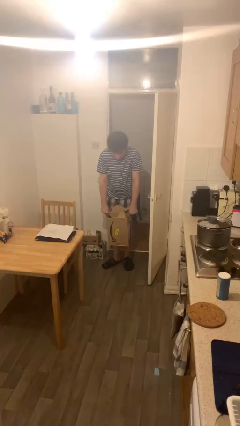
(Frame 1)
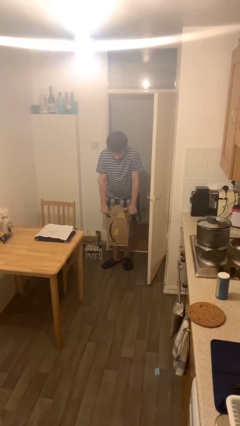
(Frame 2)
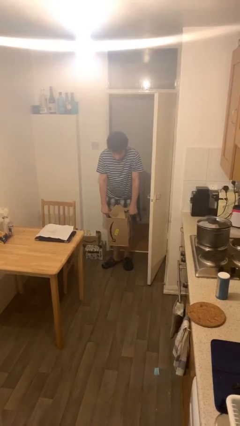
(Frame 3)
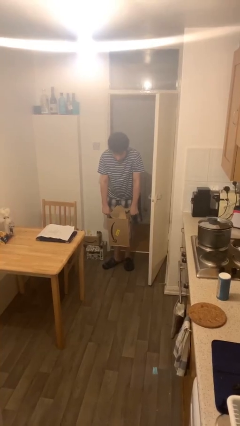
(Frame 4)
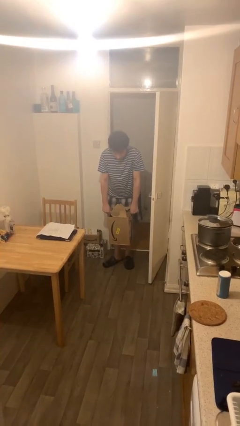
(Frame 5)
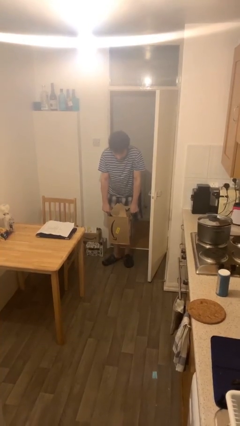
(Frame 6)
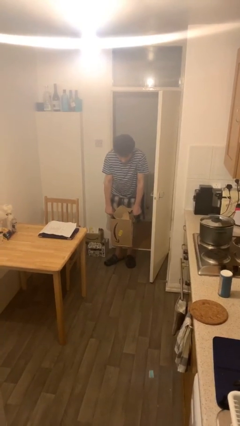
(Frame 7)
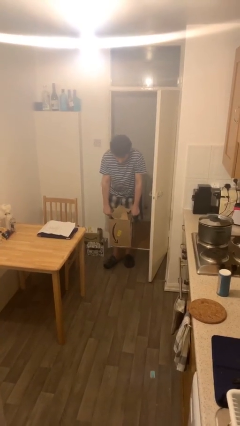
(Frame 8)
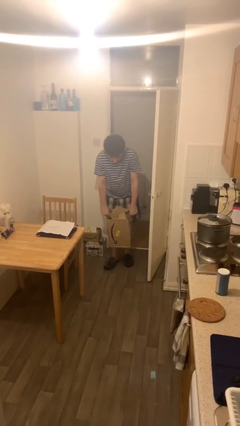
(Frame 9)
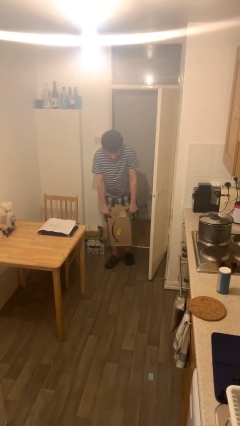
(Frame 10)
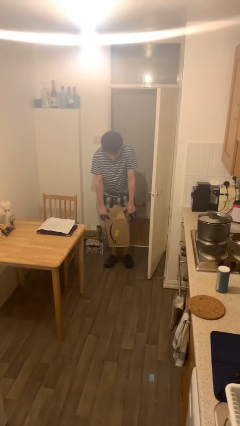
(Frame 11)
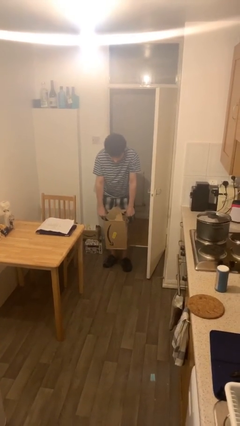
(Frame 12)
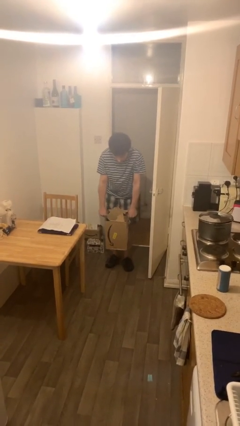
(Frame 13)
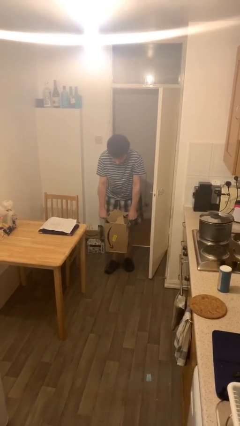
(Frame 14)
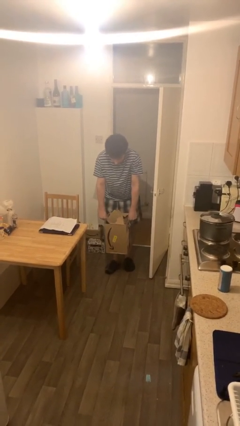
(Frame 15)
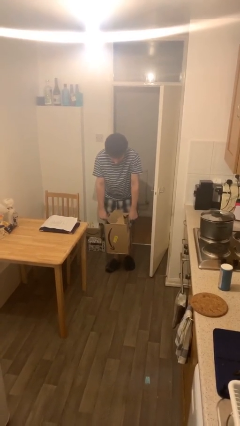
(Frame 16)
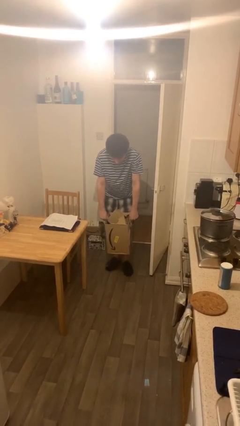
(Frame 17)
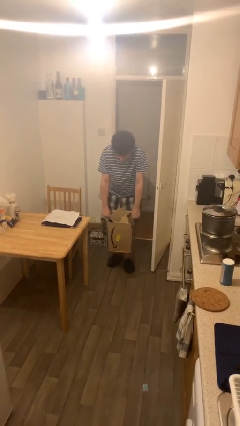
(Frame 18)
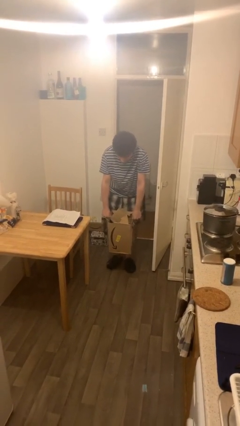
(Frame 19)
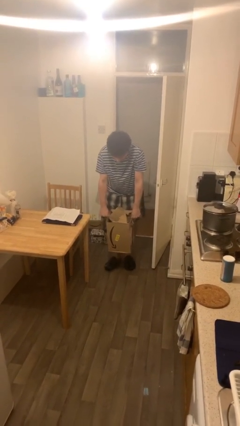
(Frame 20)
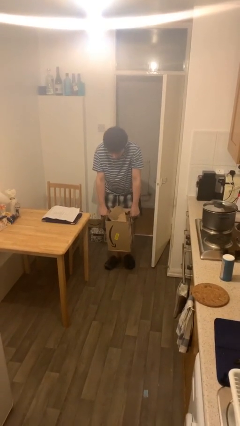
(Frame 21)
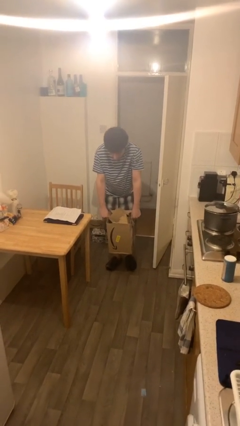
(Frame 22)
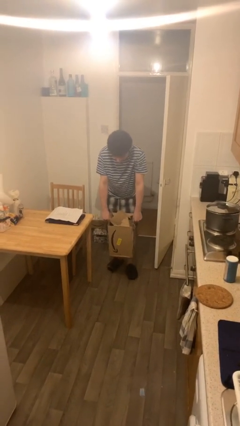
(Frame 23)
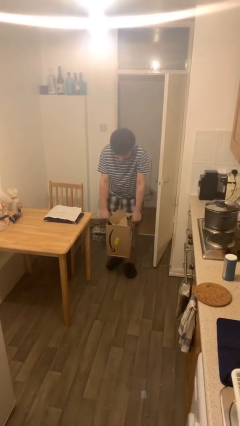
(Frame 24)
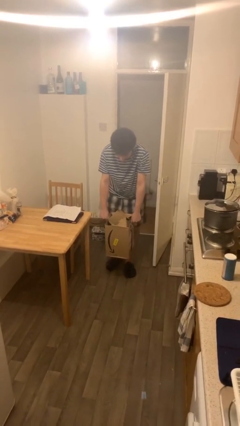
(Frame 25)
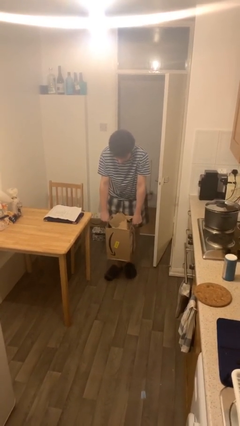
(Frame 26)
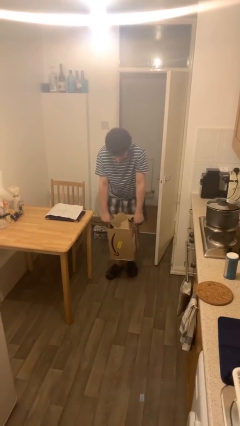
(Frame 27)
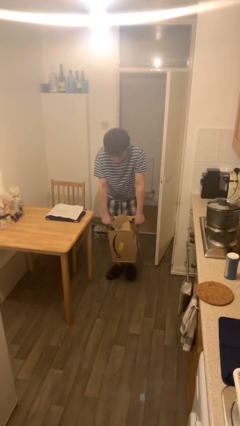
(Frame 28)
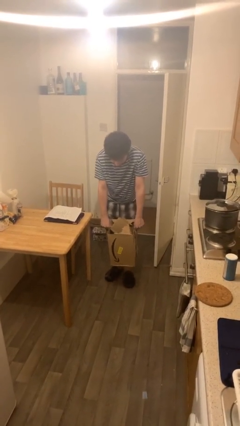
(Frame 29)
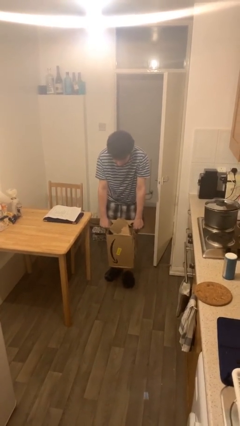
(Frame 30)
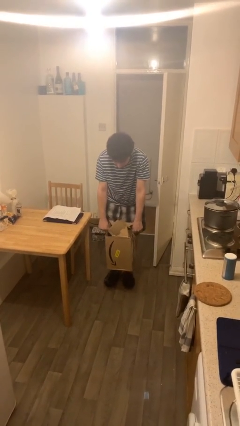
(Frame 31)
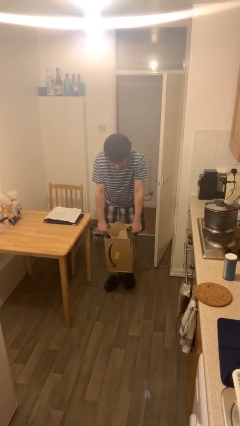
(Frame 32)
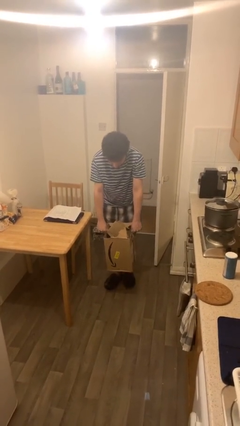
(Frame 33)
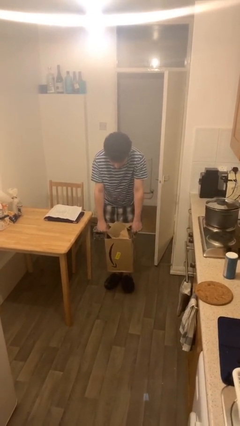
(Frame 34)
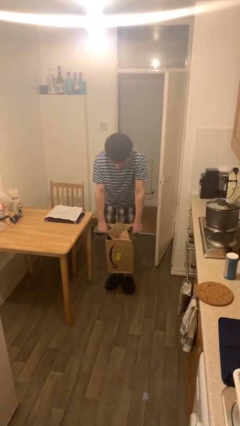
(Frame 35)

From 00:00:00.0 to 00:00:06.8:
person carries heavy object

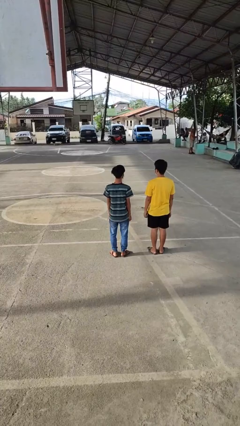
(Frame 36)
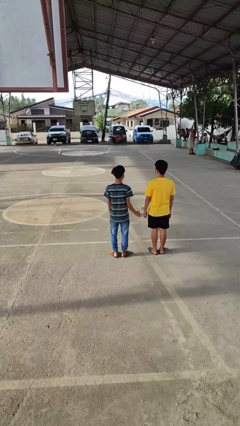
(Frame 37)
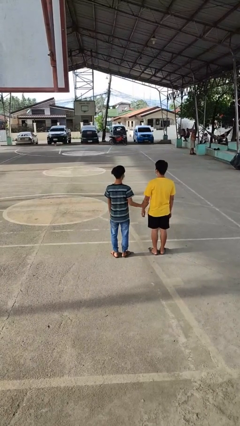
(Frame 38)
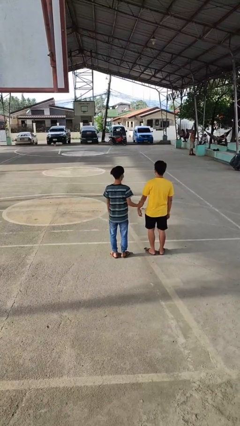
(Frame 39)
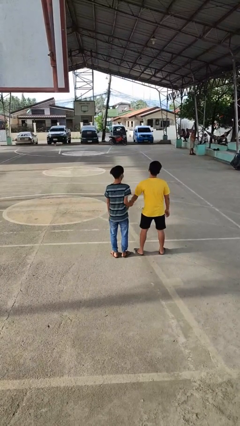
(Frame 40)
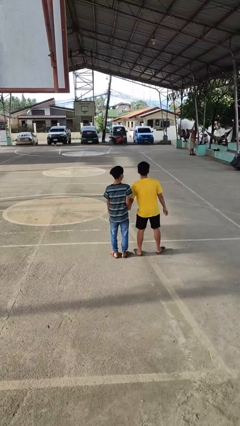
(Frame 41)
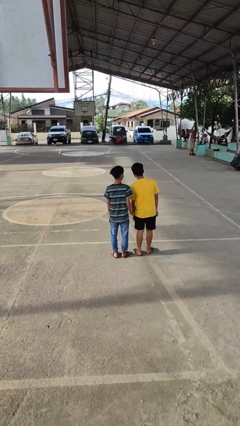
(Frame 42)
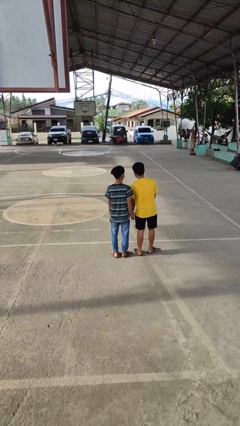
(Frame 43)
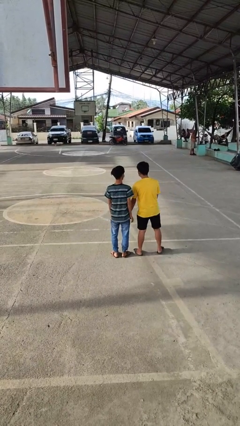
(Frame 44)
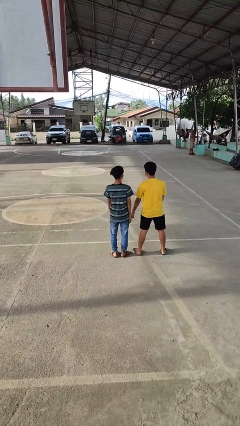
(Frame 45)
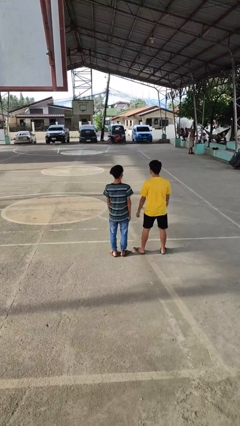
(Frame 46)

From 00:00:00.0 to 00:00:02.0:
person grabs person by forearm

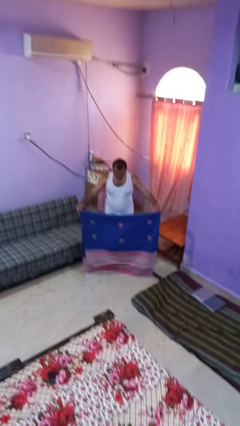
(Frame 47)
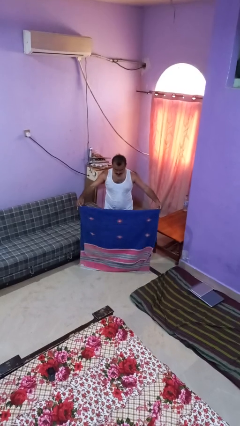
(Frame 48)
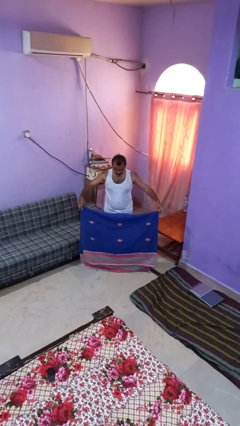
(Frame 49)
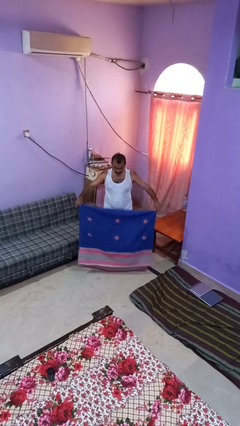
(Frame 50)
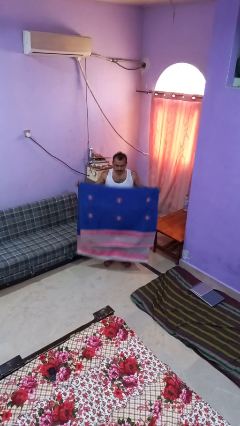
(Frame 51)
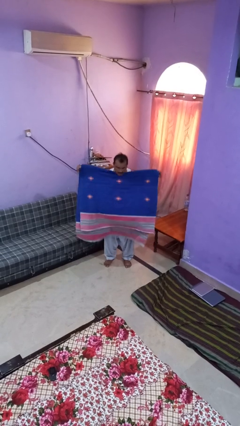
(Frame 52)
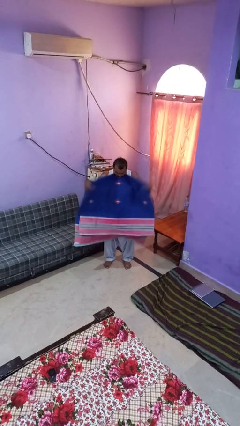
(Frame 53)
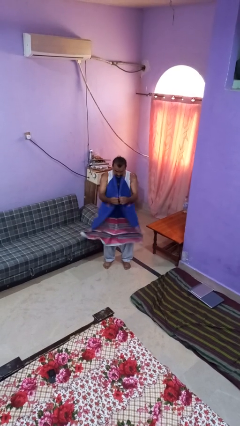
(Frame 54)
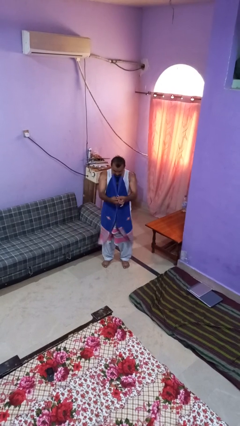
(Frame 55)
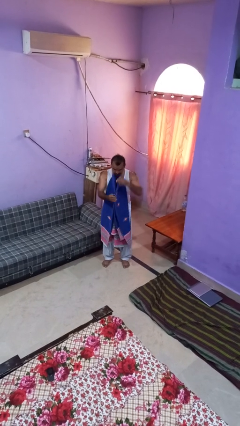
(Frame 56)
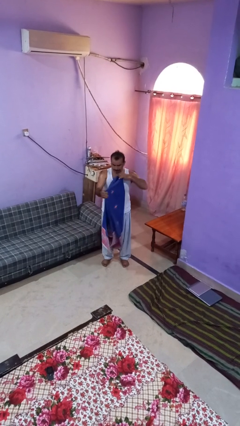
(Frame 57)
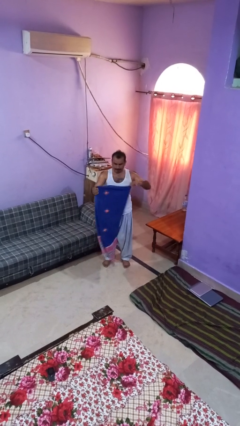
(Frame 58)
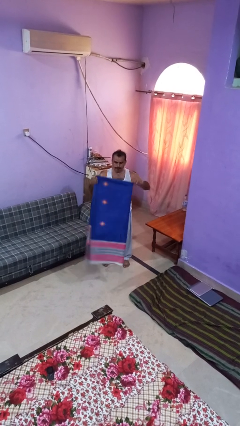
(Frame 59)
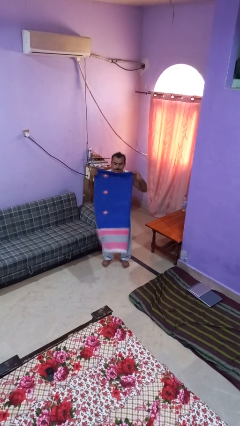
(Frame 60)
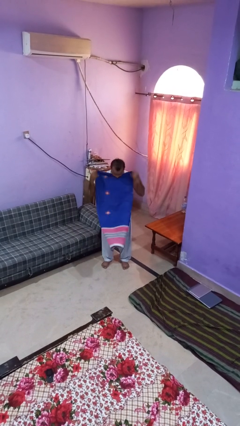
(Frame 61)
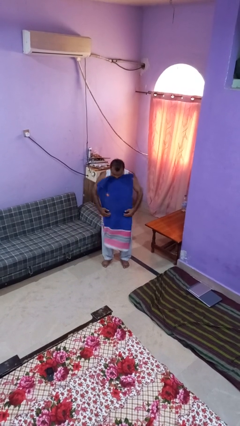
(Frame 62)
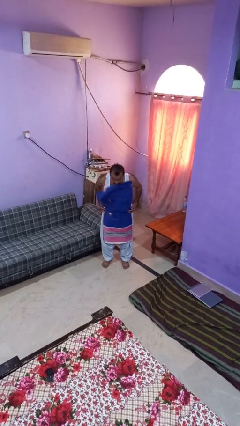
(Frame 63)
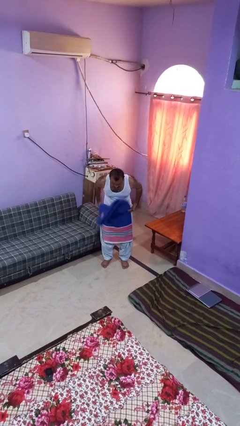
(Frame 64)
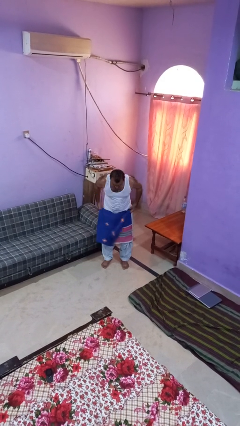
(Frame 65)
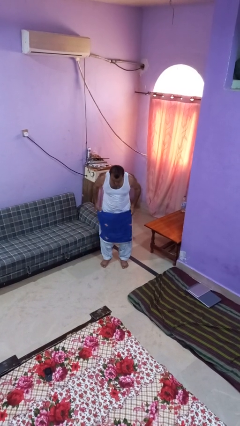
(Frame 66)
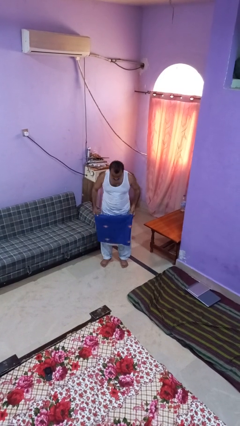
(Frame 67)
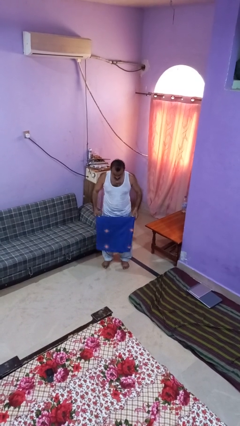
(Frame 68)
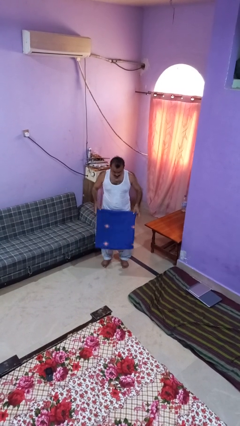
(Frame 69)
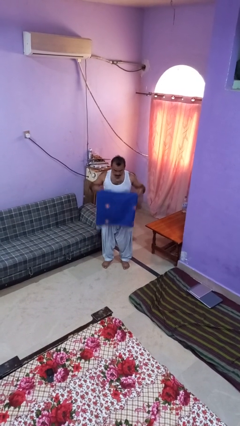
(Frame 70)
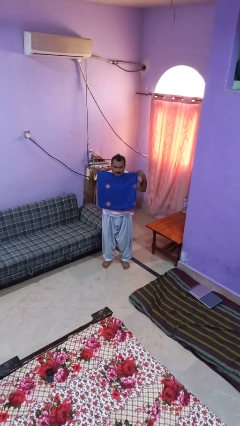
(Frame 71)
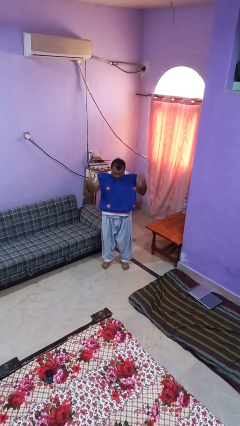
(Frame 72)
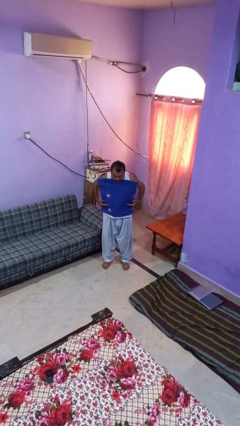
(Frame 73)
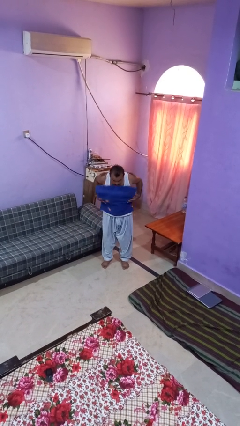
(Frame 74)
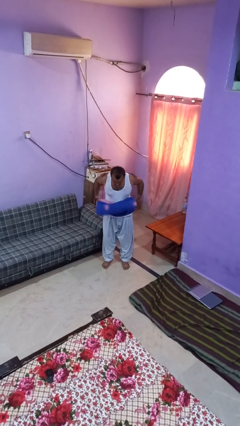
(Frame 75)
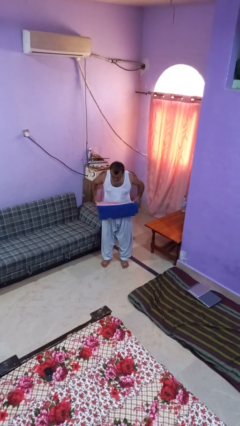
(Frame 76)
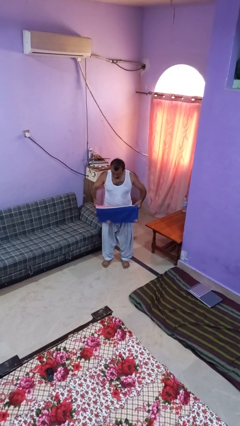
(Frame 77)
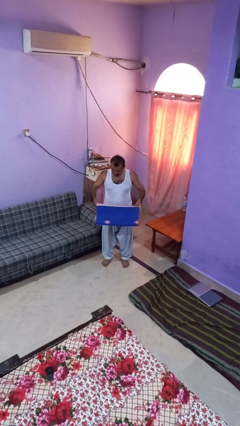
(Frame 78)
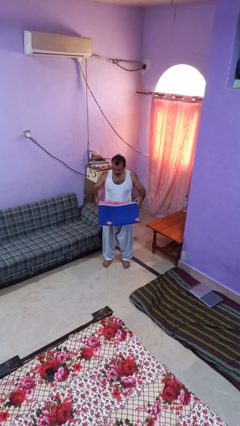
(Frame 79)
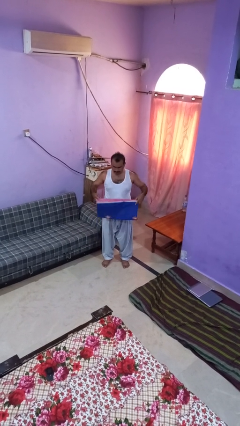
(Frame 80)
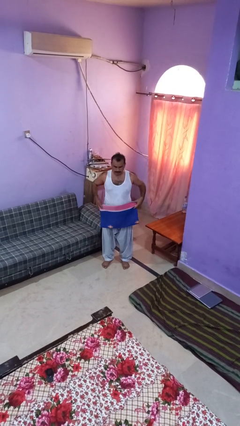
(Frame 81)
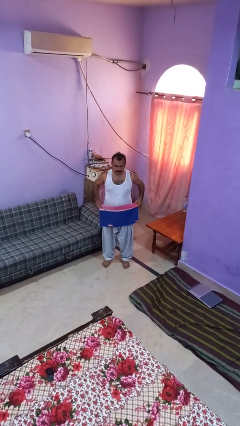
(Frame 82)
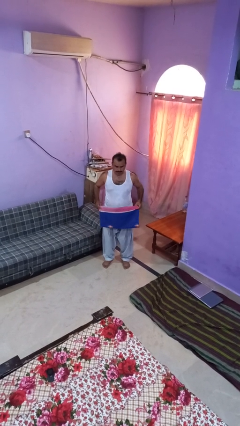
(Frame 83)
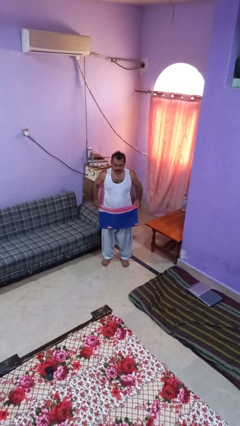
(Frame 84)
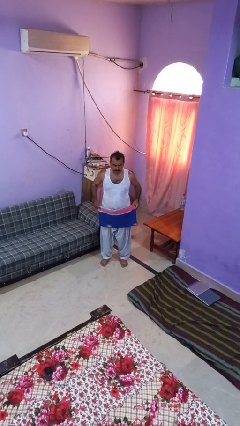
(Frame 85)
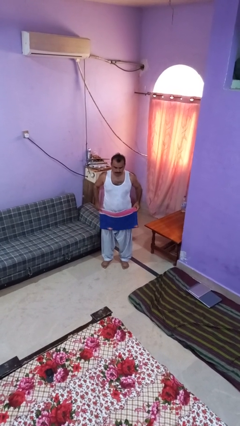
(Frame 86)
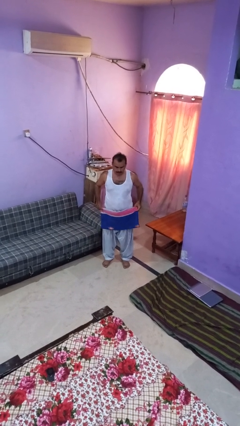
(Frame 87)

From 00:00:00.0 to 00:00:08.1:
person folds blanket

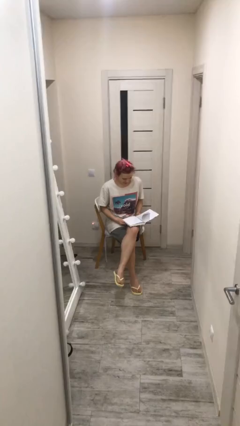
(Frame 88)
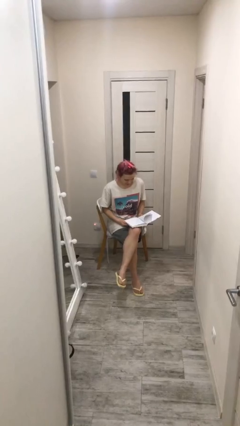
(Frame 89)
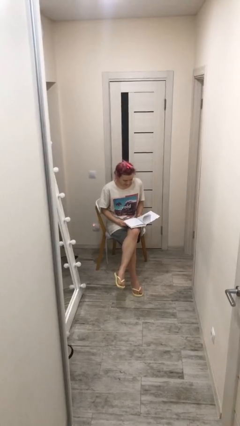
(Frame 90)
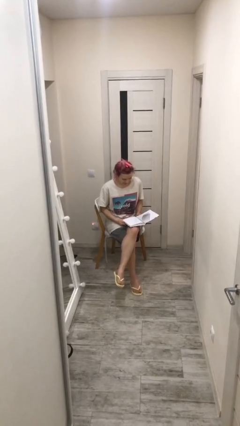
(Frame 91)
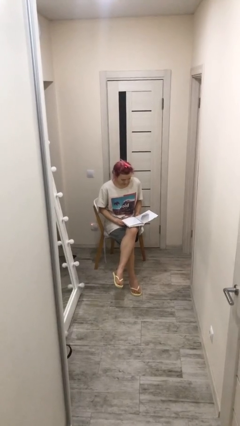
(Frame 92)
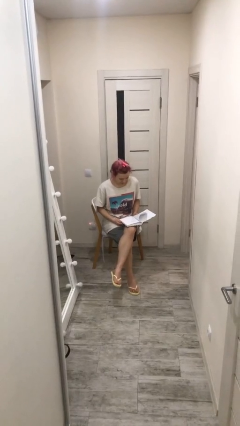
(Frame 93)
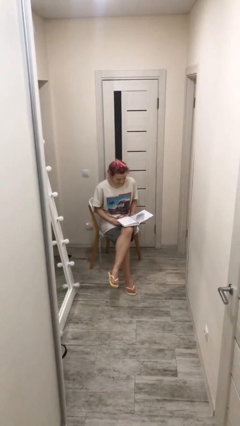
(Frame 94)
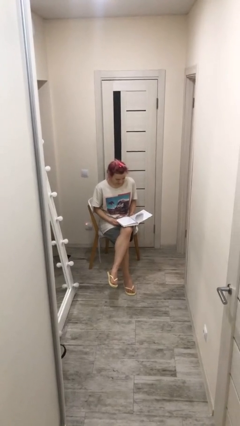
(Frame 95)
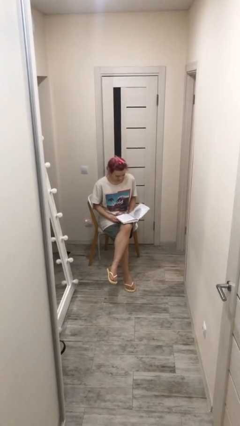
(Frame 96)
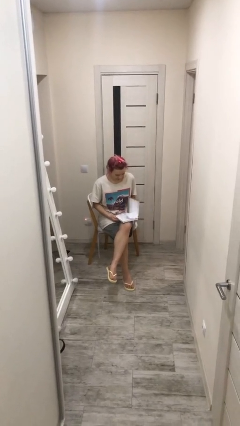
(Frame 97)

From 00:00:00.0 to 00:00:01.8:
person reads document
